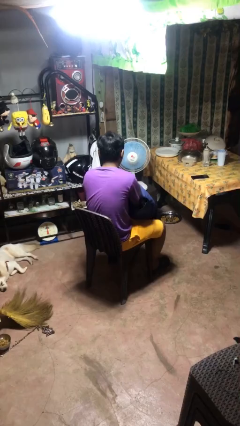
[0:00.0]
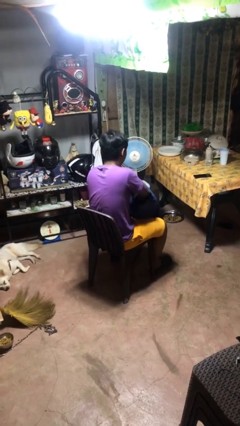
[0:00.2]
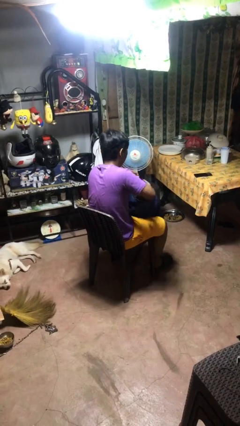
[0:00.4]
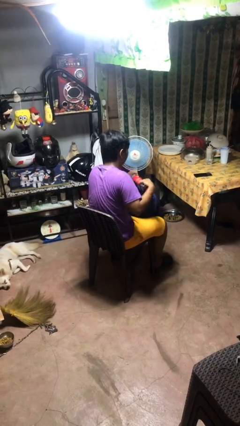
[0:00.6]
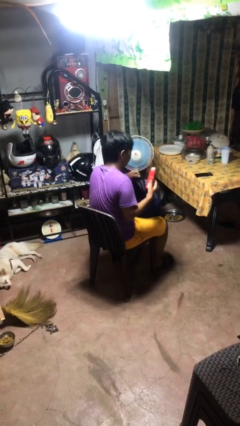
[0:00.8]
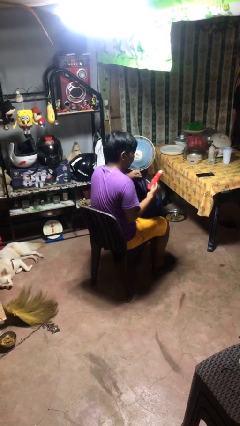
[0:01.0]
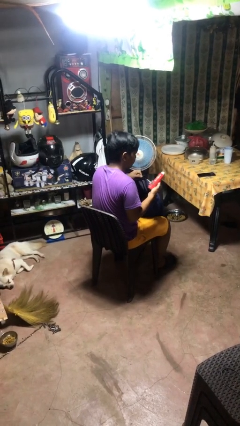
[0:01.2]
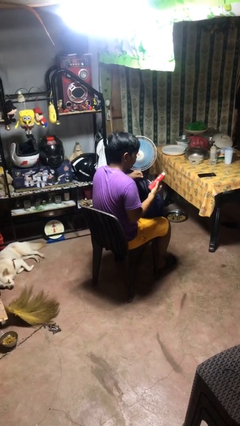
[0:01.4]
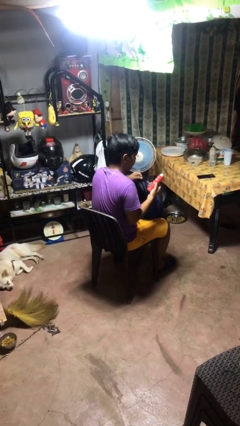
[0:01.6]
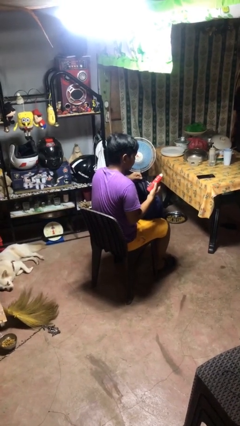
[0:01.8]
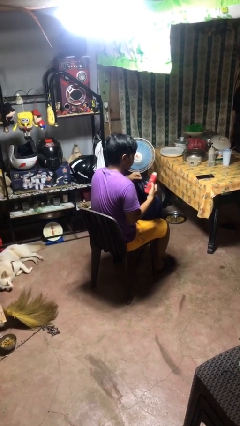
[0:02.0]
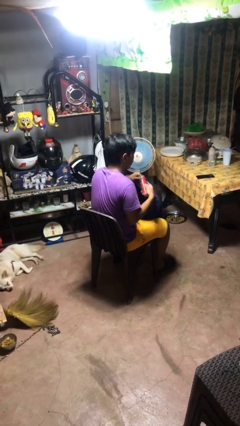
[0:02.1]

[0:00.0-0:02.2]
person takes object from backpack

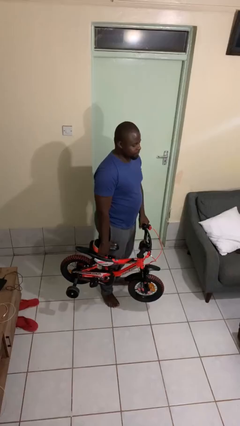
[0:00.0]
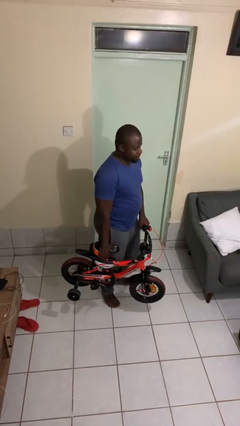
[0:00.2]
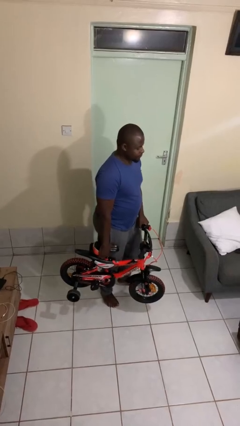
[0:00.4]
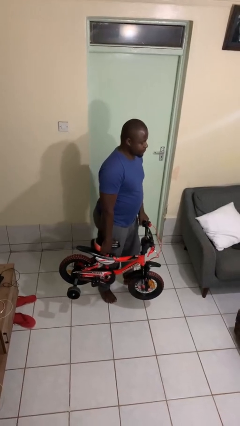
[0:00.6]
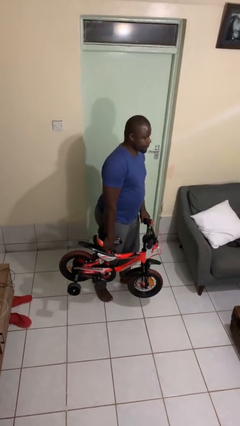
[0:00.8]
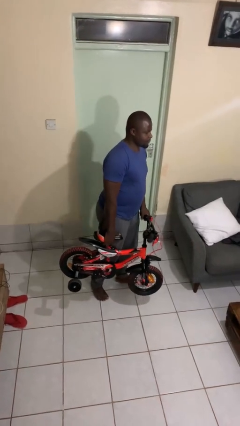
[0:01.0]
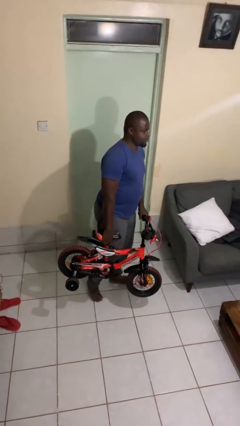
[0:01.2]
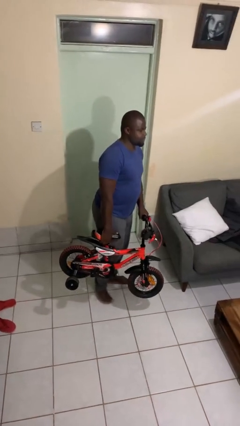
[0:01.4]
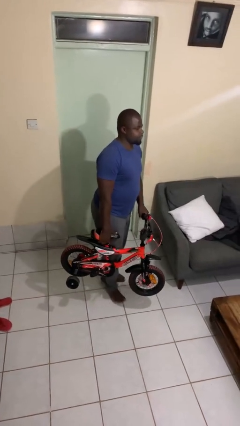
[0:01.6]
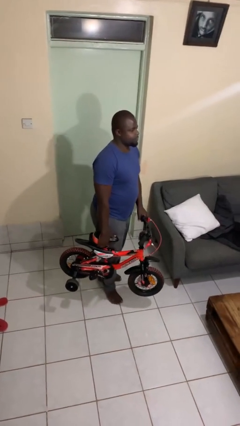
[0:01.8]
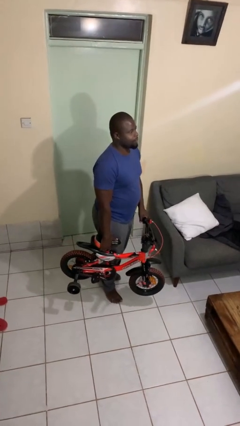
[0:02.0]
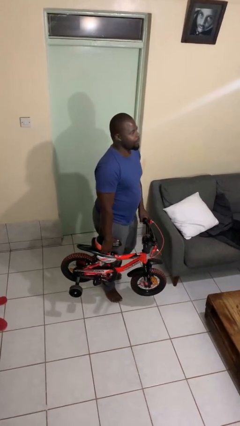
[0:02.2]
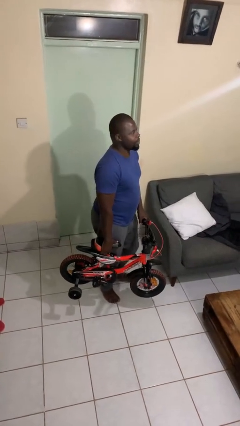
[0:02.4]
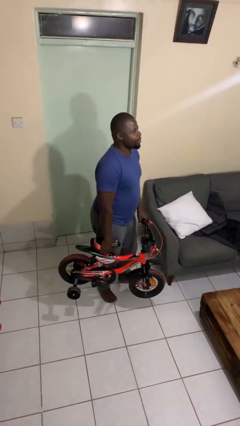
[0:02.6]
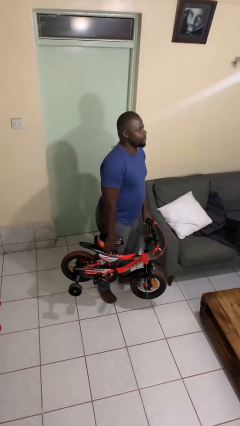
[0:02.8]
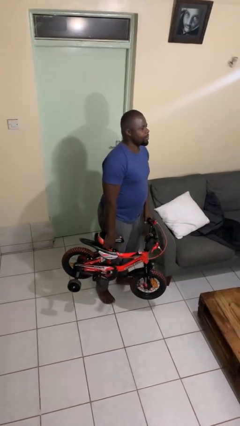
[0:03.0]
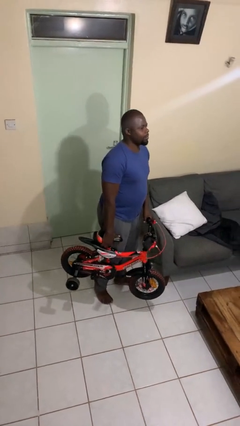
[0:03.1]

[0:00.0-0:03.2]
person carries bicycle

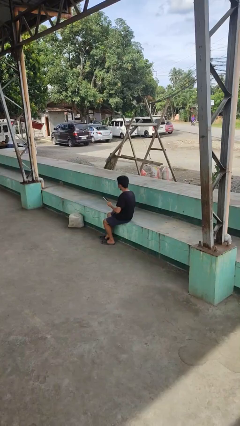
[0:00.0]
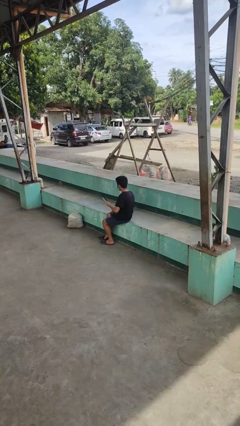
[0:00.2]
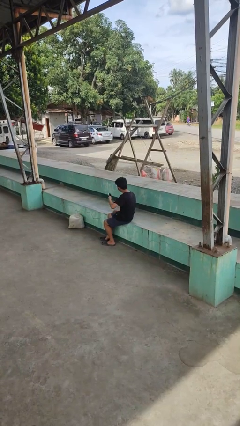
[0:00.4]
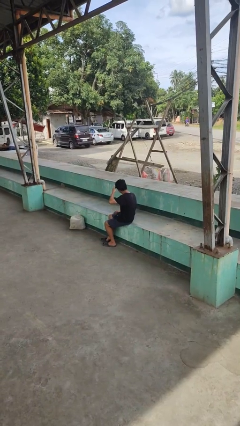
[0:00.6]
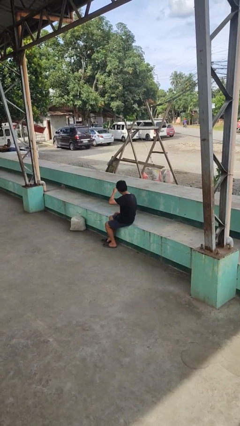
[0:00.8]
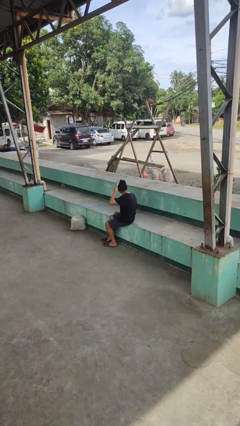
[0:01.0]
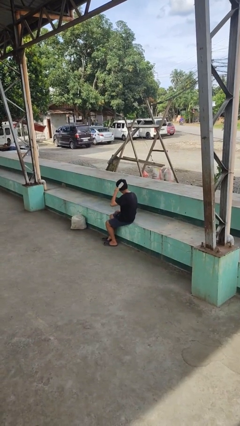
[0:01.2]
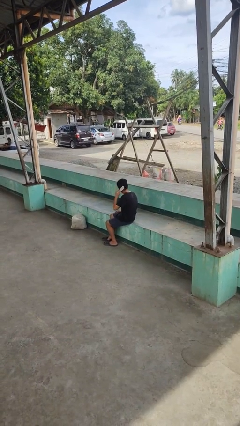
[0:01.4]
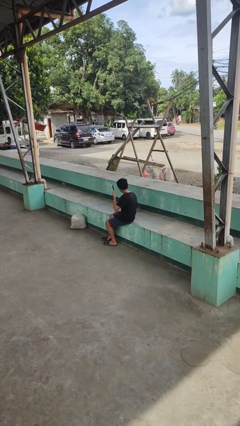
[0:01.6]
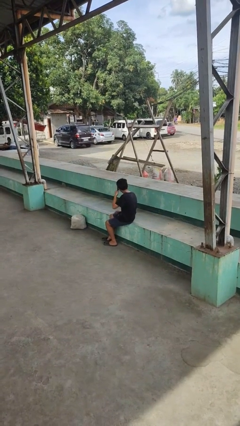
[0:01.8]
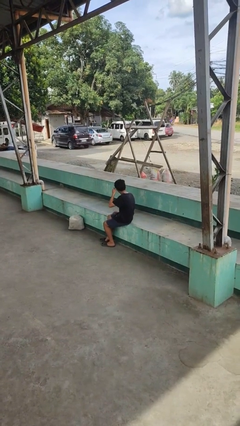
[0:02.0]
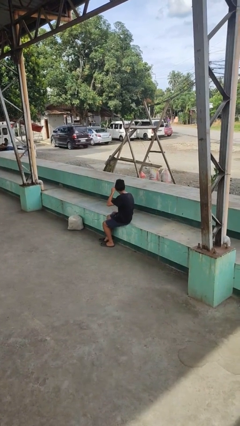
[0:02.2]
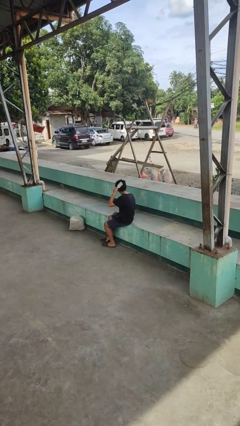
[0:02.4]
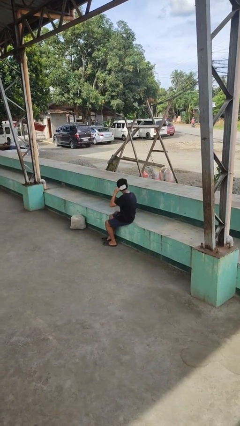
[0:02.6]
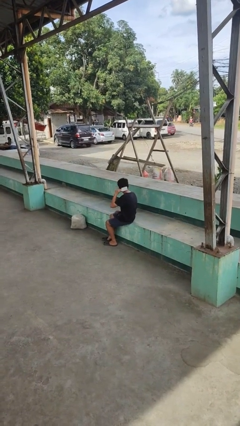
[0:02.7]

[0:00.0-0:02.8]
person brushes hair

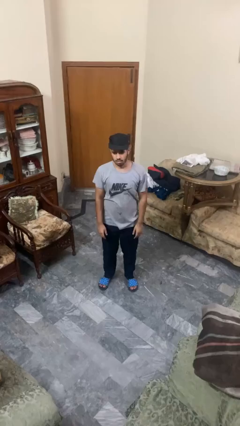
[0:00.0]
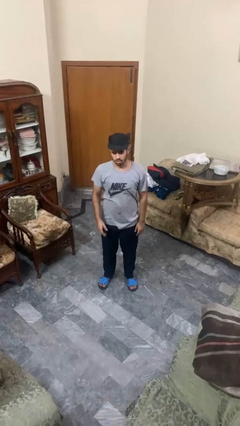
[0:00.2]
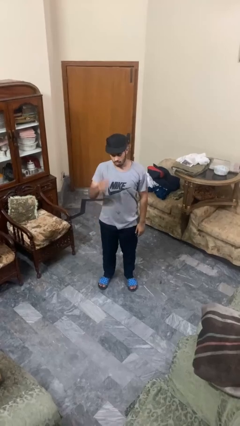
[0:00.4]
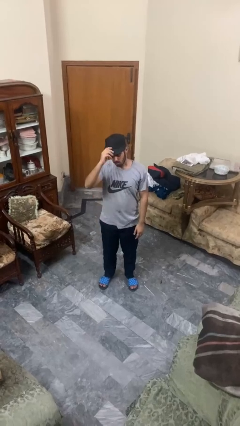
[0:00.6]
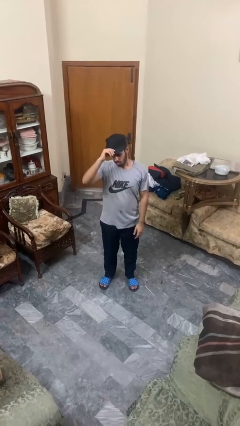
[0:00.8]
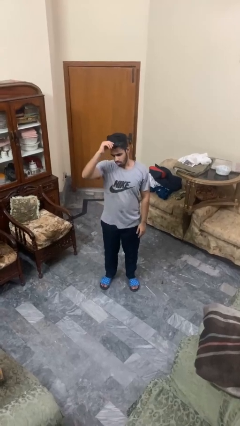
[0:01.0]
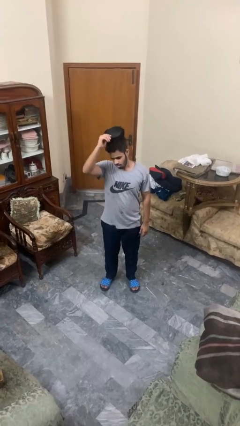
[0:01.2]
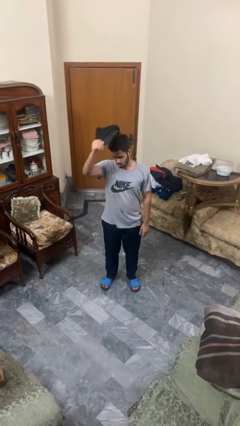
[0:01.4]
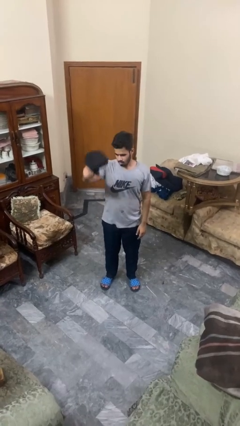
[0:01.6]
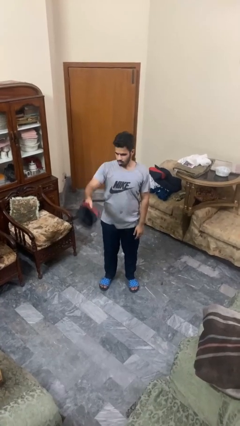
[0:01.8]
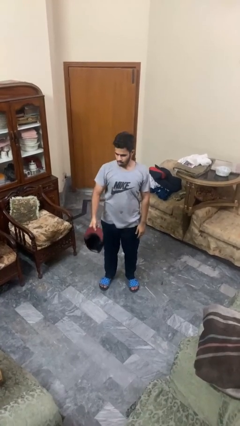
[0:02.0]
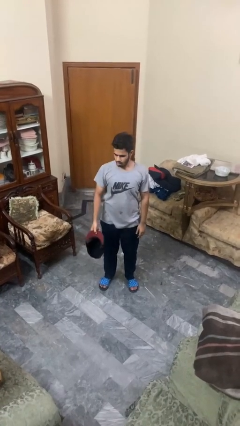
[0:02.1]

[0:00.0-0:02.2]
person takes off hat

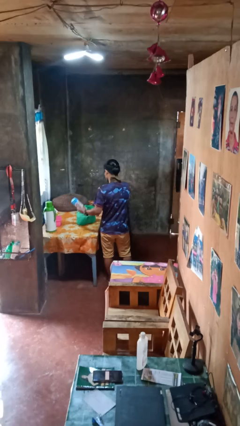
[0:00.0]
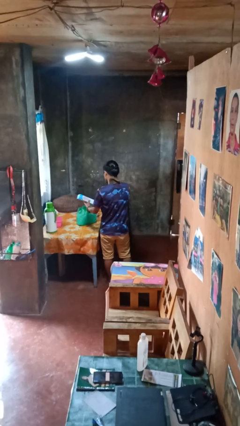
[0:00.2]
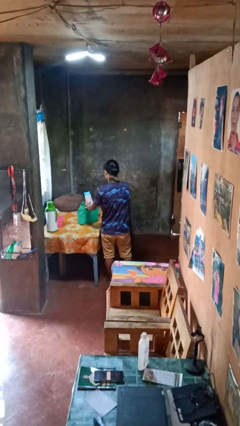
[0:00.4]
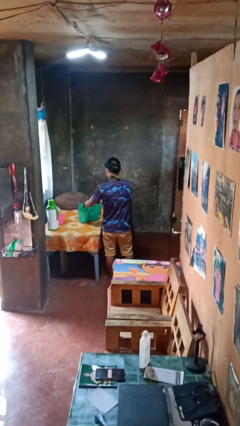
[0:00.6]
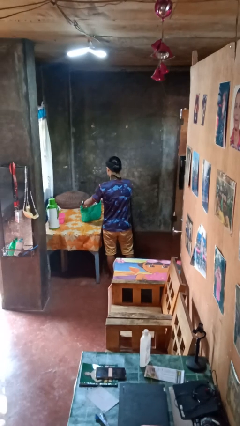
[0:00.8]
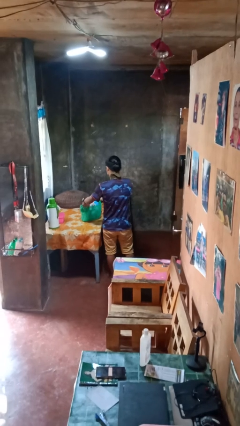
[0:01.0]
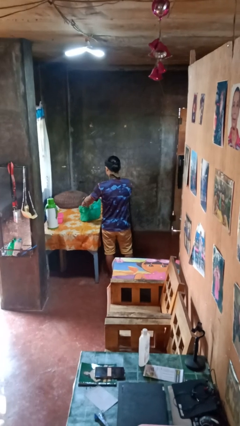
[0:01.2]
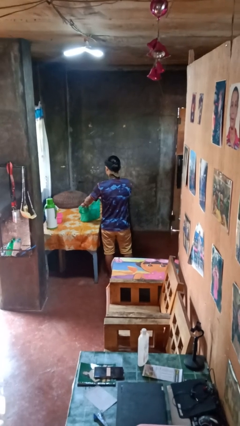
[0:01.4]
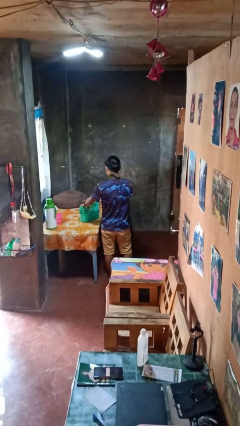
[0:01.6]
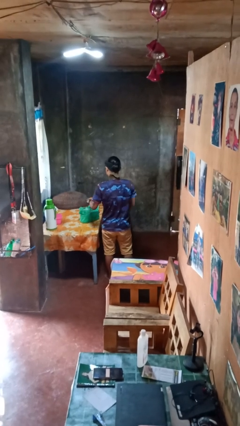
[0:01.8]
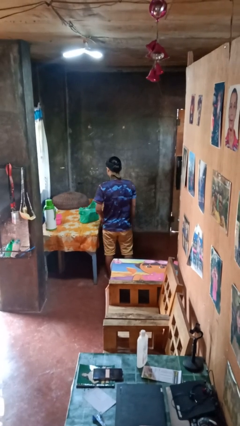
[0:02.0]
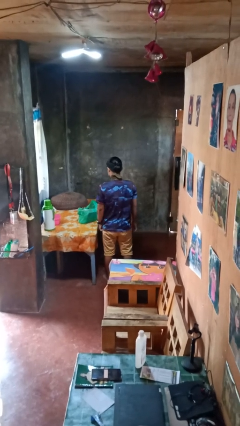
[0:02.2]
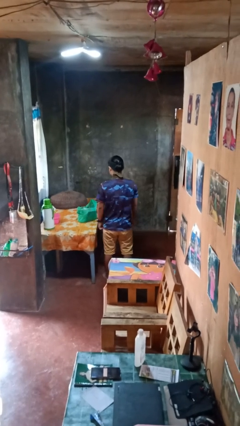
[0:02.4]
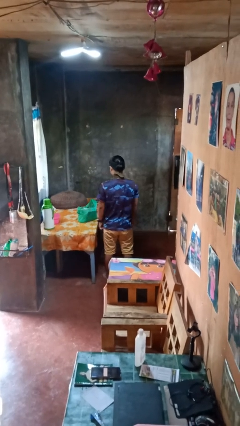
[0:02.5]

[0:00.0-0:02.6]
person puts object into bag

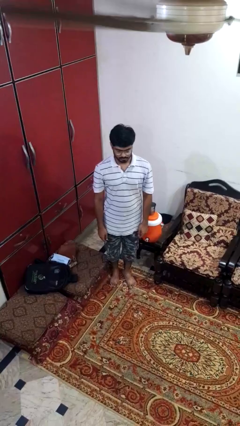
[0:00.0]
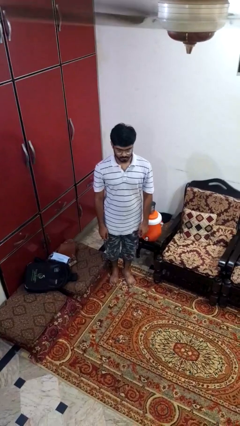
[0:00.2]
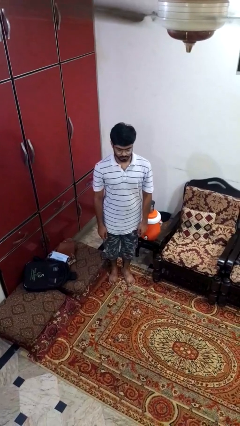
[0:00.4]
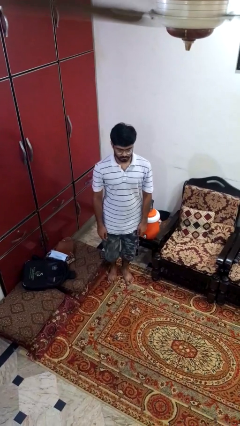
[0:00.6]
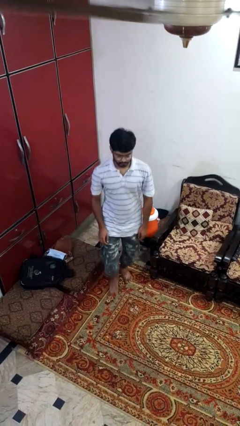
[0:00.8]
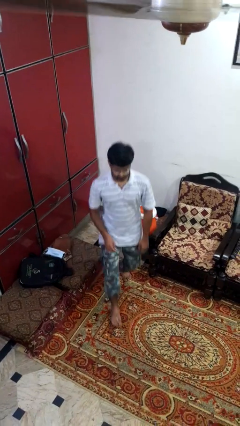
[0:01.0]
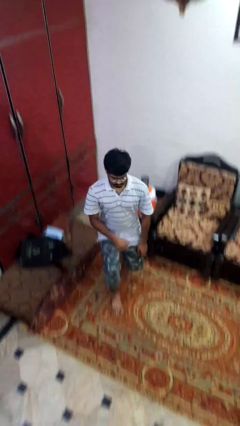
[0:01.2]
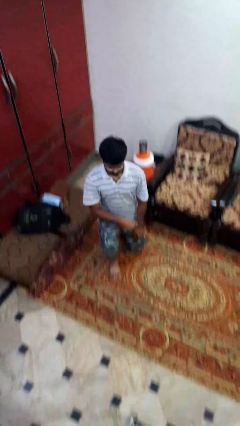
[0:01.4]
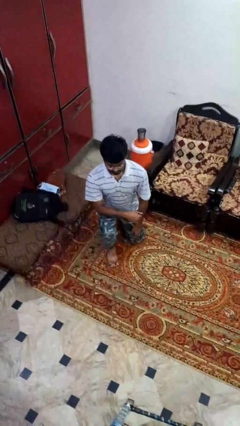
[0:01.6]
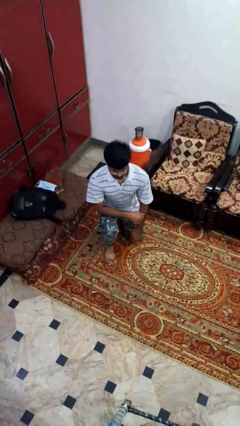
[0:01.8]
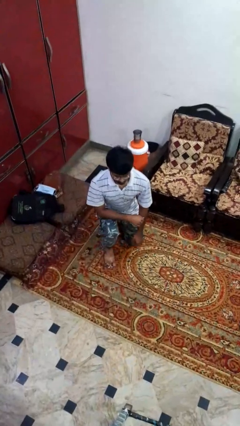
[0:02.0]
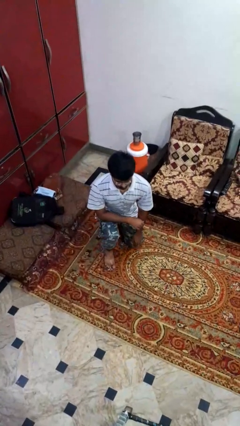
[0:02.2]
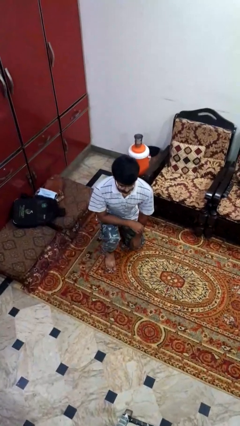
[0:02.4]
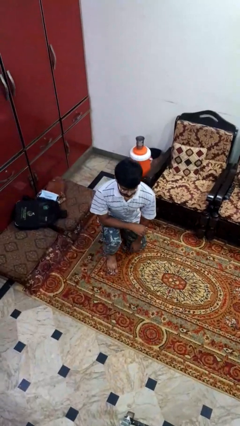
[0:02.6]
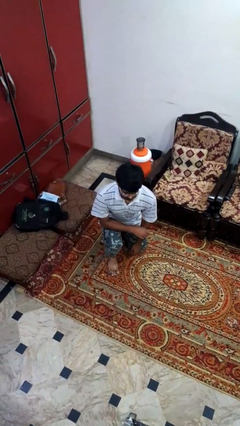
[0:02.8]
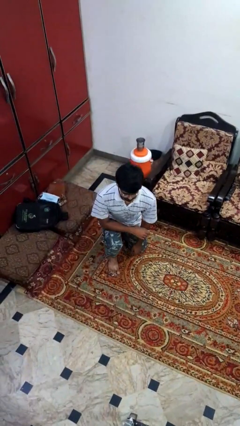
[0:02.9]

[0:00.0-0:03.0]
person kneels

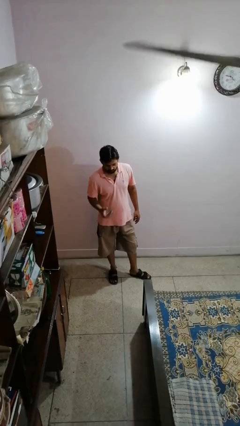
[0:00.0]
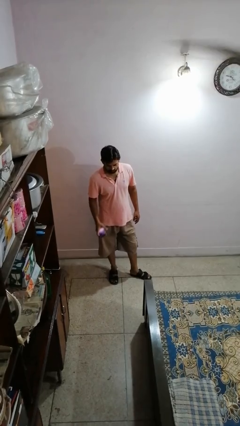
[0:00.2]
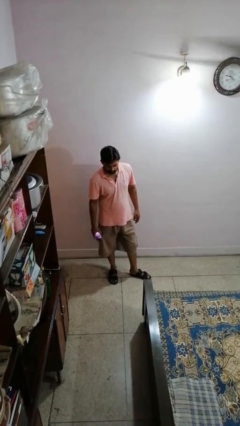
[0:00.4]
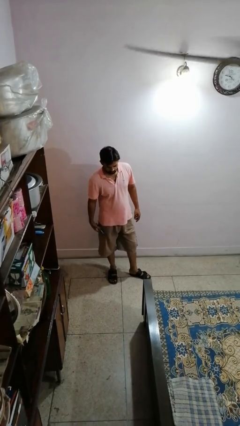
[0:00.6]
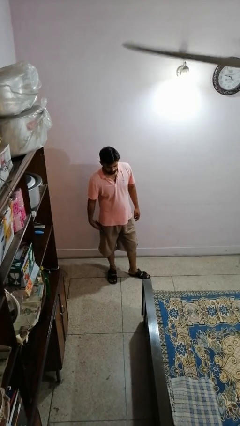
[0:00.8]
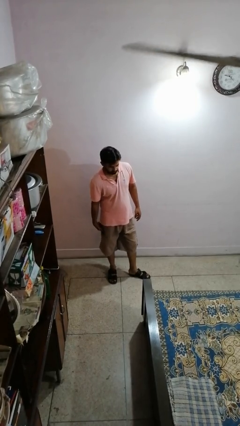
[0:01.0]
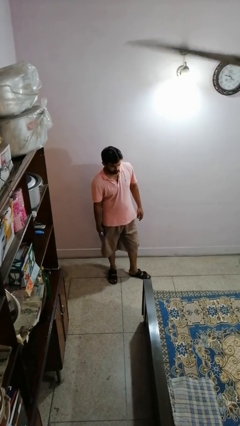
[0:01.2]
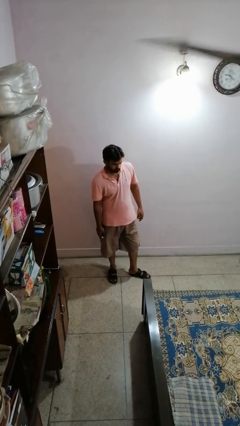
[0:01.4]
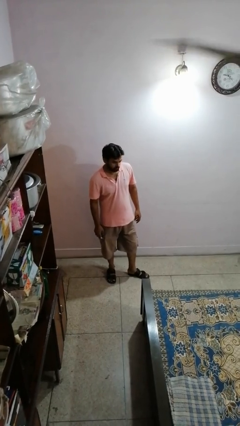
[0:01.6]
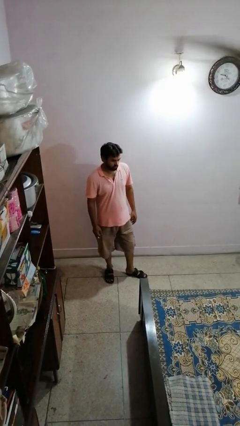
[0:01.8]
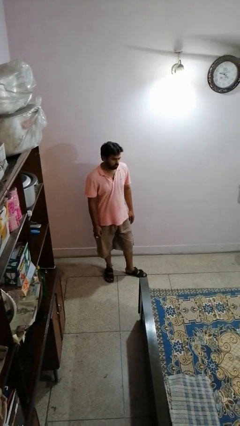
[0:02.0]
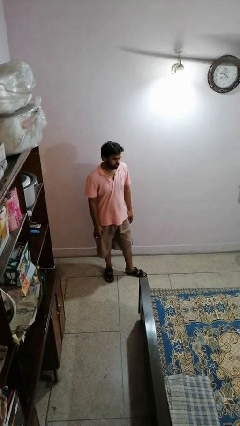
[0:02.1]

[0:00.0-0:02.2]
person puts phone into pocket
